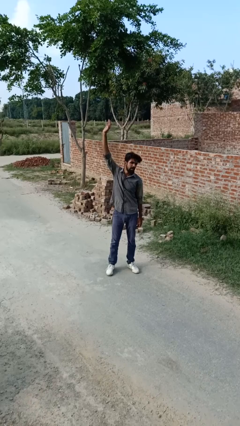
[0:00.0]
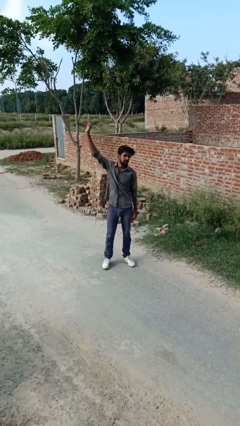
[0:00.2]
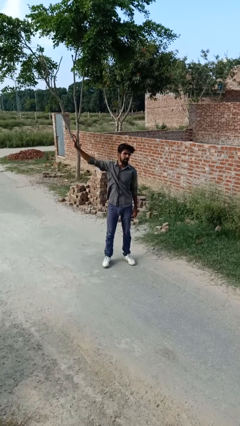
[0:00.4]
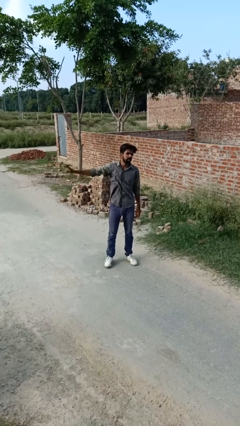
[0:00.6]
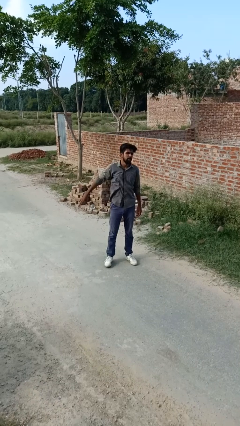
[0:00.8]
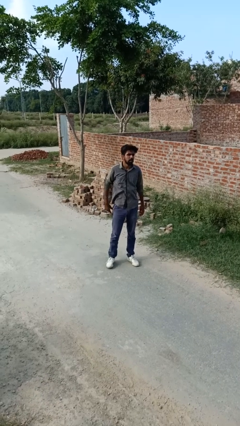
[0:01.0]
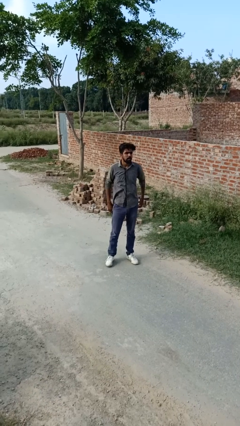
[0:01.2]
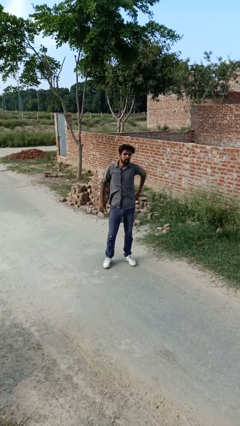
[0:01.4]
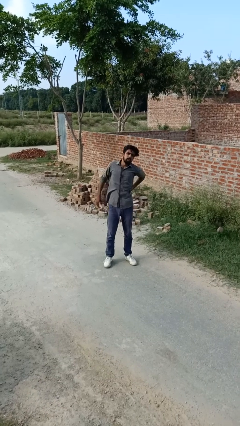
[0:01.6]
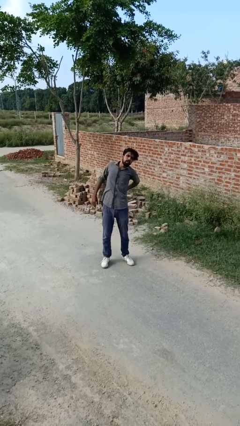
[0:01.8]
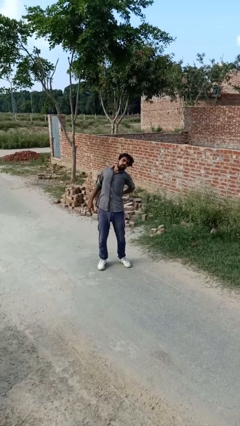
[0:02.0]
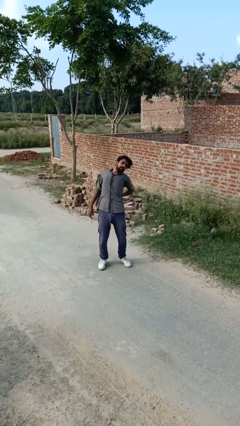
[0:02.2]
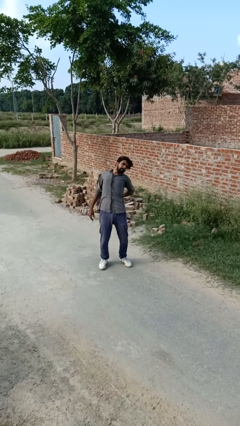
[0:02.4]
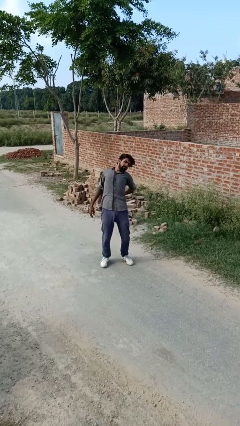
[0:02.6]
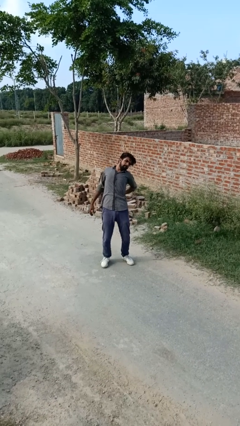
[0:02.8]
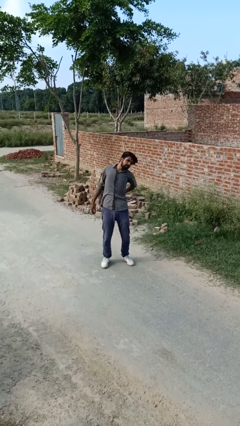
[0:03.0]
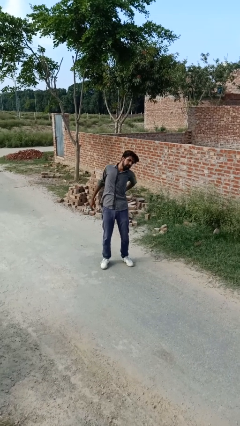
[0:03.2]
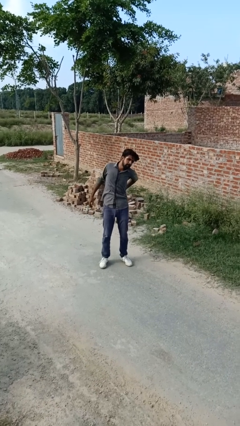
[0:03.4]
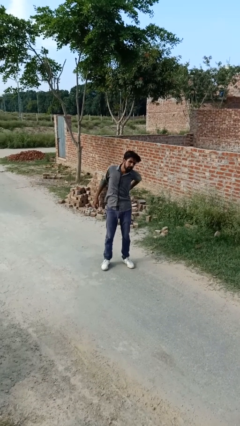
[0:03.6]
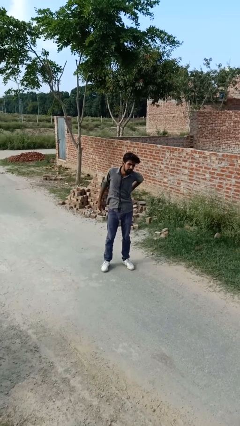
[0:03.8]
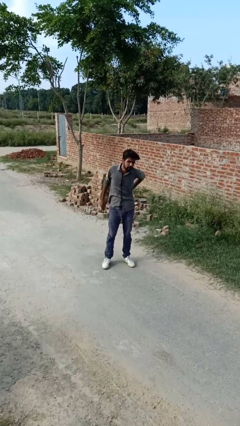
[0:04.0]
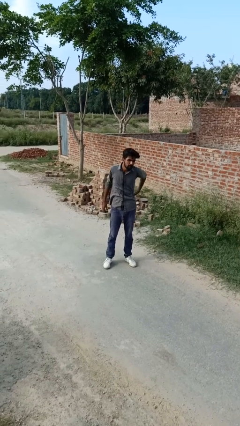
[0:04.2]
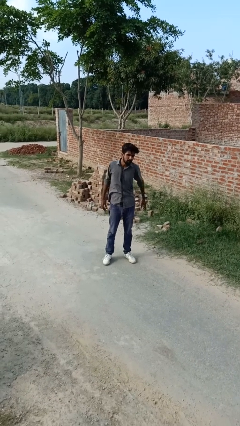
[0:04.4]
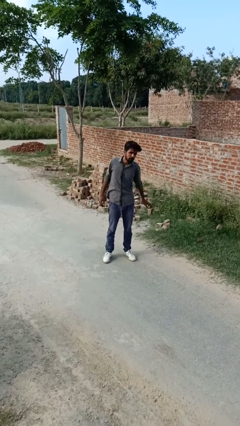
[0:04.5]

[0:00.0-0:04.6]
person stretches back

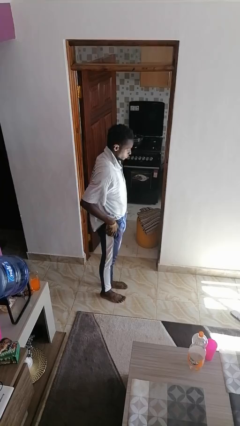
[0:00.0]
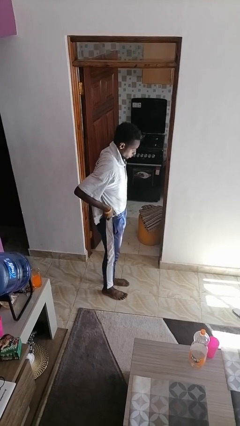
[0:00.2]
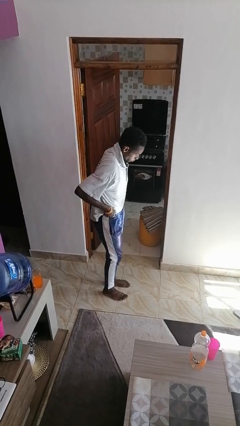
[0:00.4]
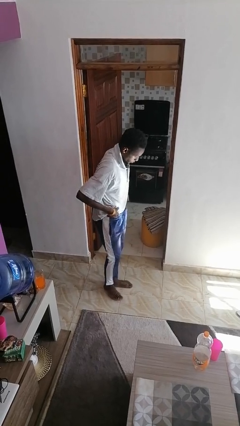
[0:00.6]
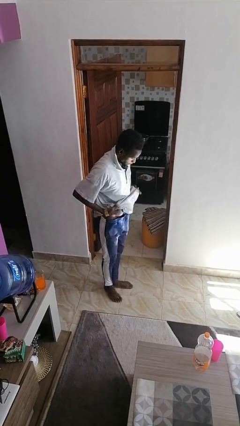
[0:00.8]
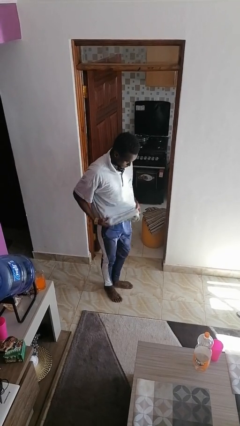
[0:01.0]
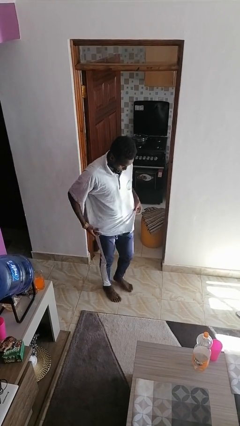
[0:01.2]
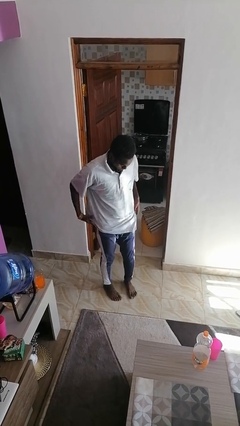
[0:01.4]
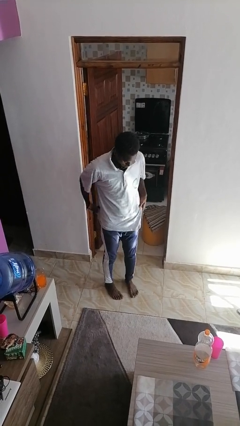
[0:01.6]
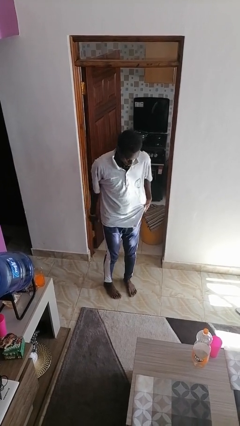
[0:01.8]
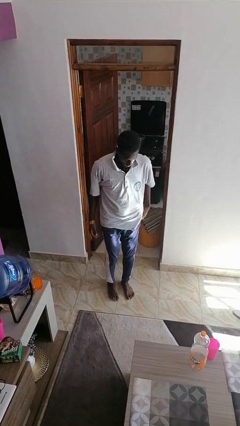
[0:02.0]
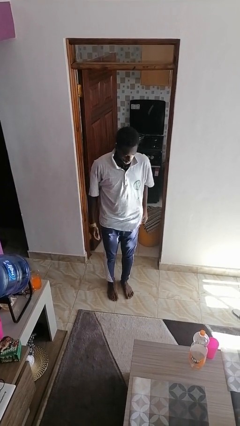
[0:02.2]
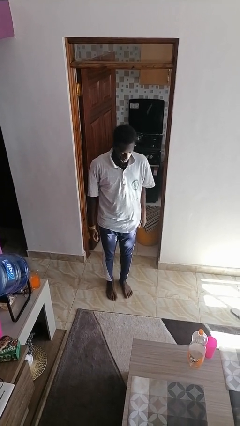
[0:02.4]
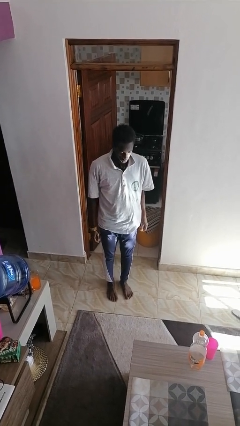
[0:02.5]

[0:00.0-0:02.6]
person untucks shirt

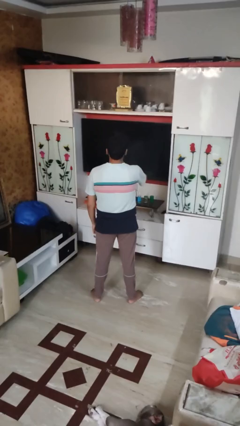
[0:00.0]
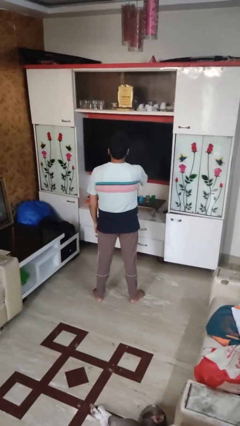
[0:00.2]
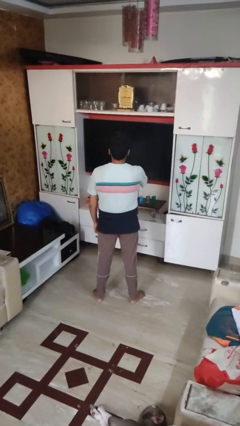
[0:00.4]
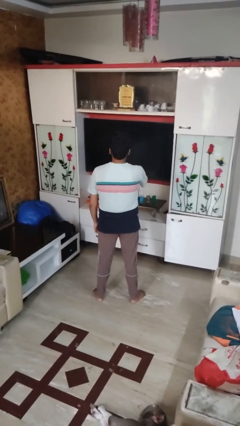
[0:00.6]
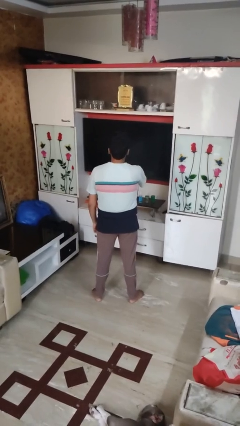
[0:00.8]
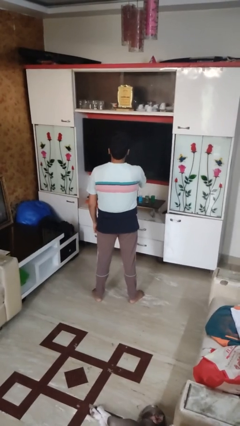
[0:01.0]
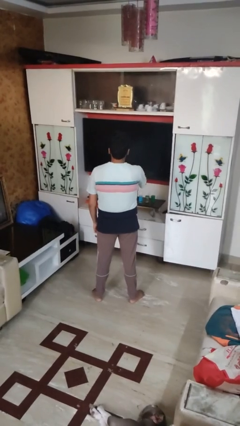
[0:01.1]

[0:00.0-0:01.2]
person gestures be quiet

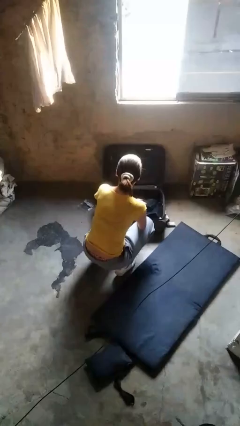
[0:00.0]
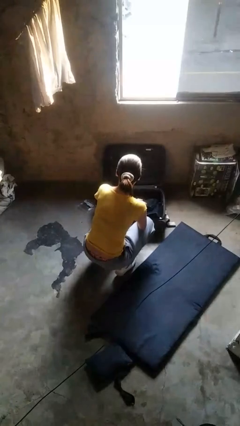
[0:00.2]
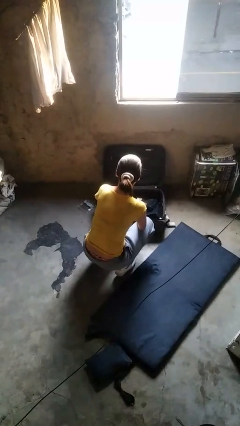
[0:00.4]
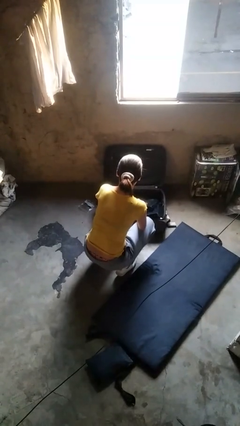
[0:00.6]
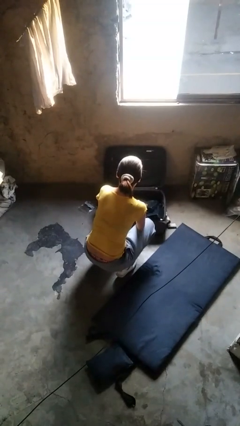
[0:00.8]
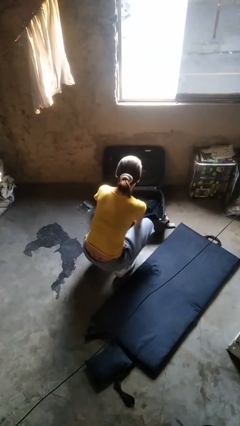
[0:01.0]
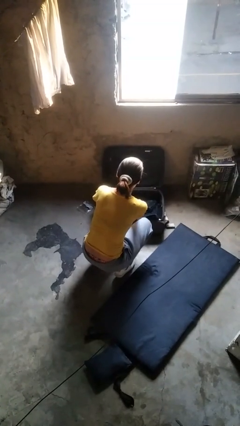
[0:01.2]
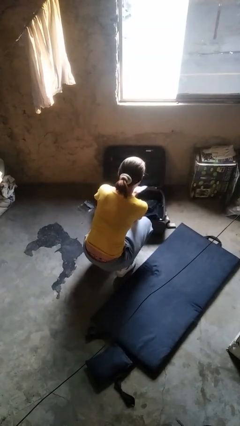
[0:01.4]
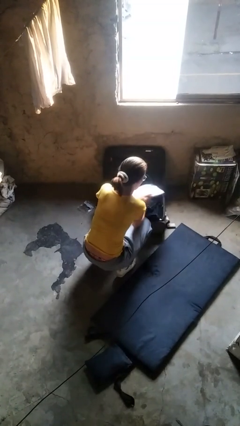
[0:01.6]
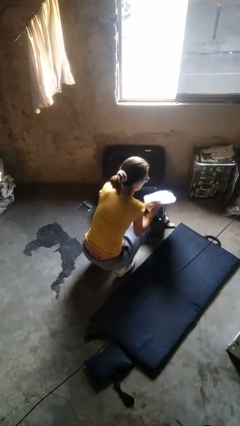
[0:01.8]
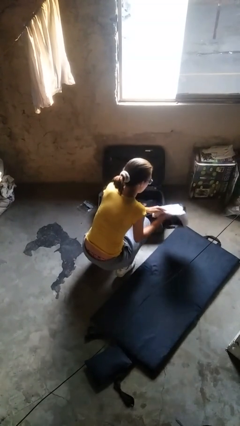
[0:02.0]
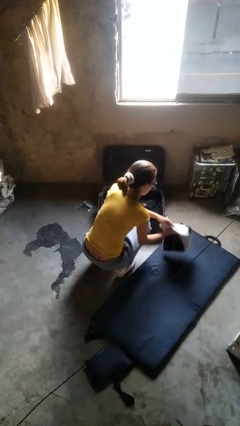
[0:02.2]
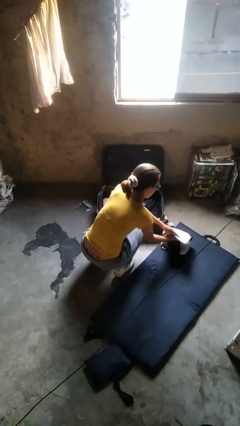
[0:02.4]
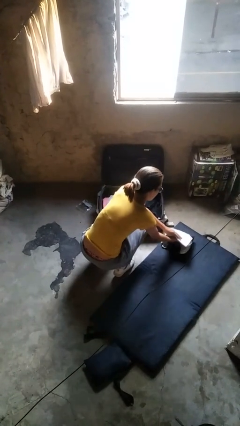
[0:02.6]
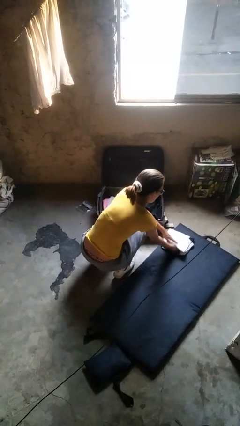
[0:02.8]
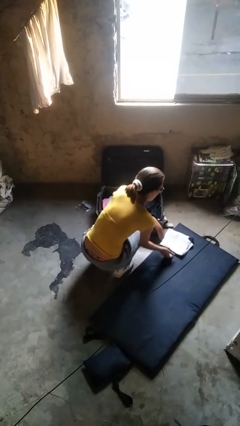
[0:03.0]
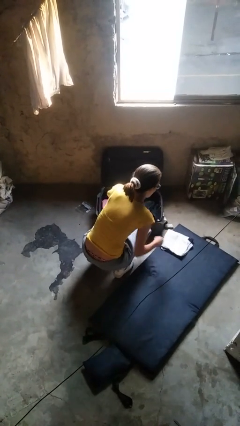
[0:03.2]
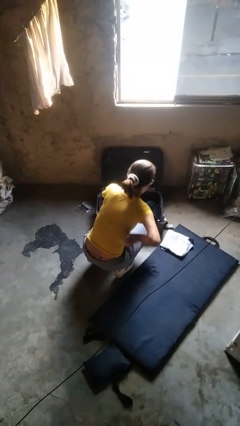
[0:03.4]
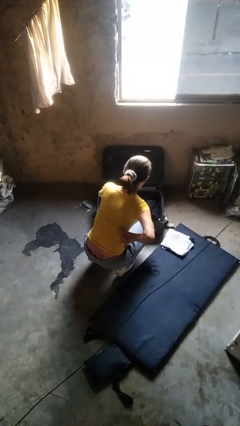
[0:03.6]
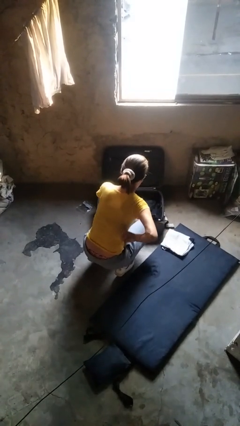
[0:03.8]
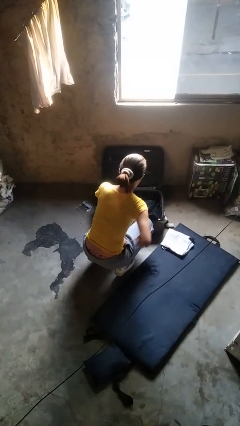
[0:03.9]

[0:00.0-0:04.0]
person unloads clothes from suitcase

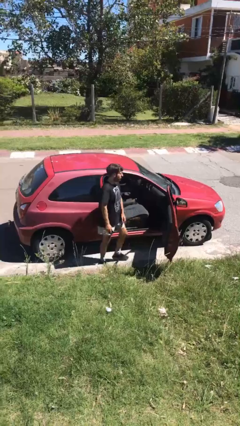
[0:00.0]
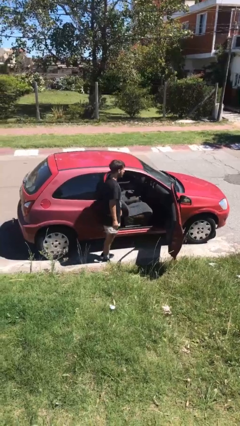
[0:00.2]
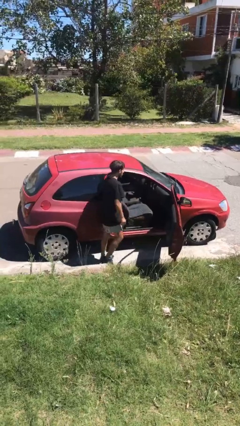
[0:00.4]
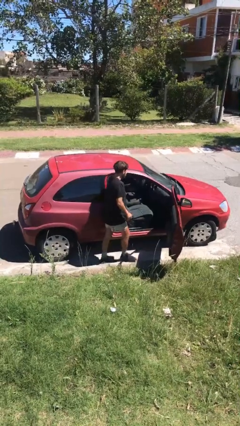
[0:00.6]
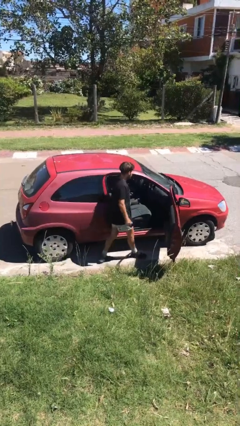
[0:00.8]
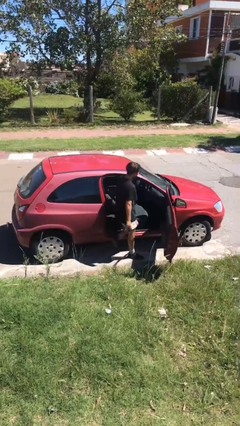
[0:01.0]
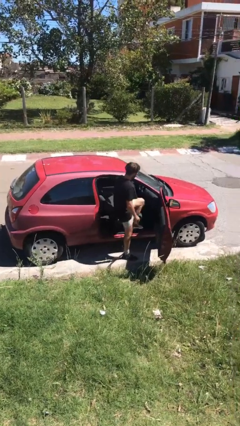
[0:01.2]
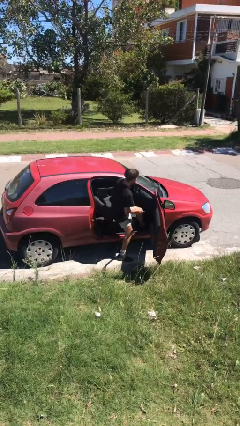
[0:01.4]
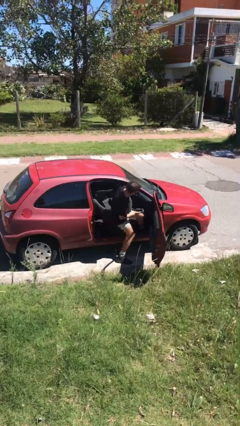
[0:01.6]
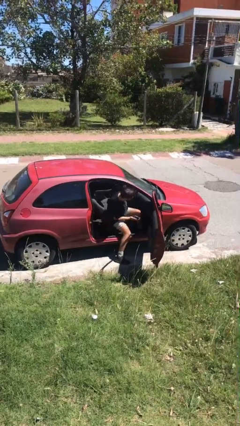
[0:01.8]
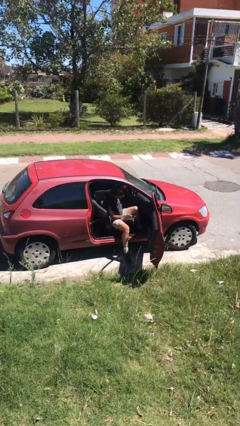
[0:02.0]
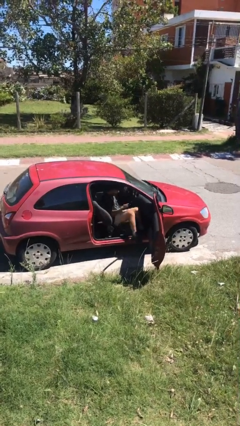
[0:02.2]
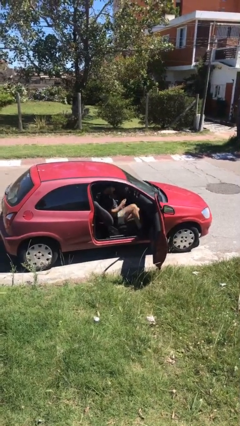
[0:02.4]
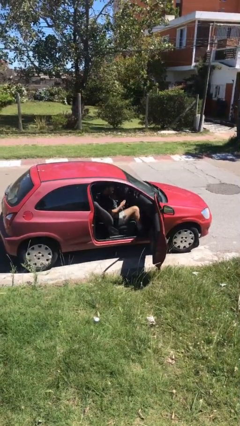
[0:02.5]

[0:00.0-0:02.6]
person enters car

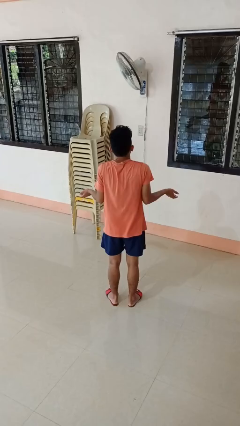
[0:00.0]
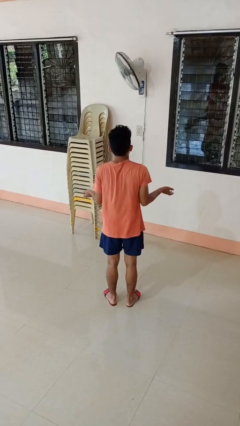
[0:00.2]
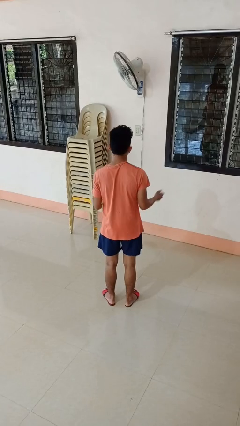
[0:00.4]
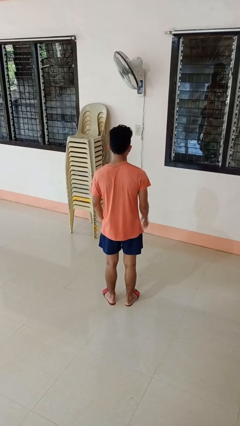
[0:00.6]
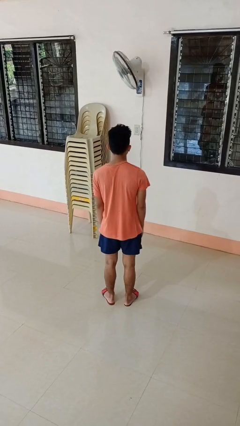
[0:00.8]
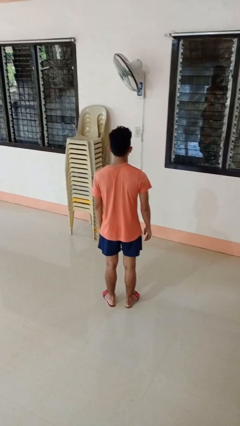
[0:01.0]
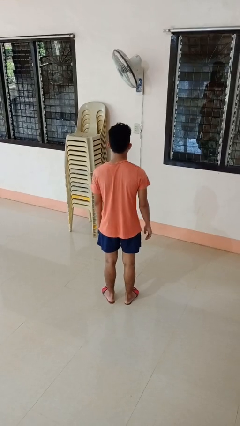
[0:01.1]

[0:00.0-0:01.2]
person shrugs

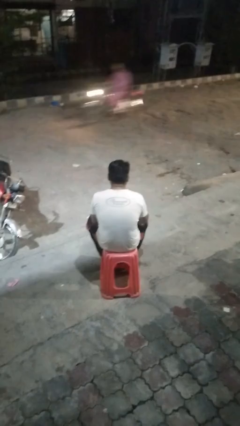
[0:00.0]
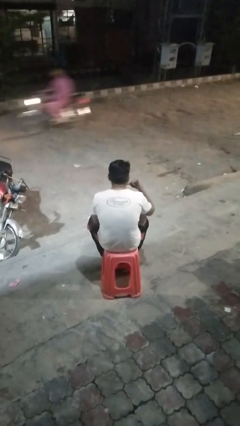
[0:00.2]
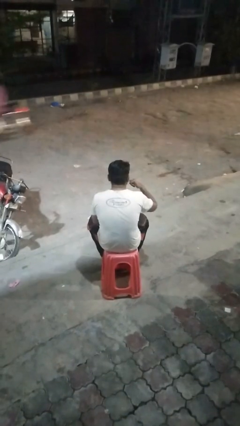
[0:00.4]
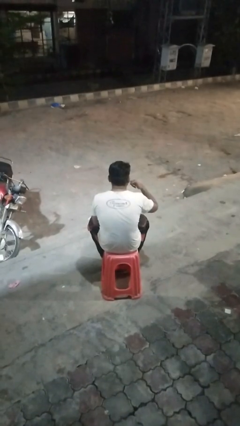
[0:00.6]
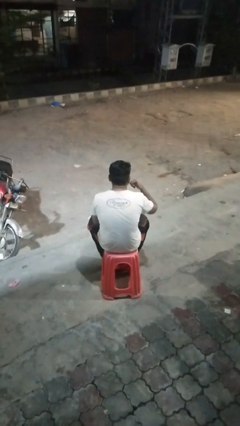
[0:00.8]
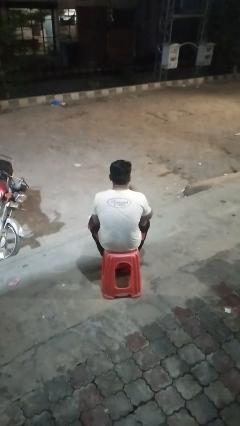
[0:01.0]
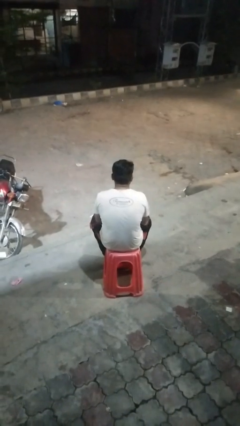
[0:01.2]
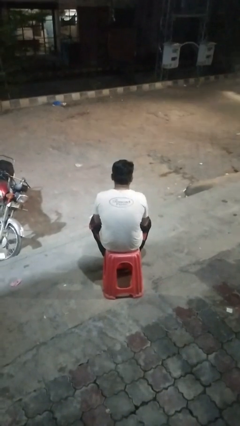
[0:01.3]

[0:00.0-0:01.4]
person gestures call me
